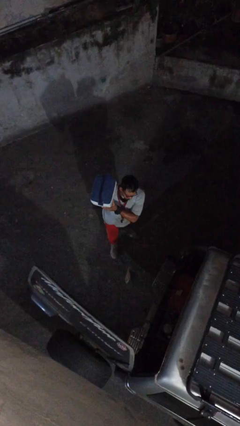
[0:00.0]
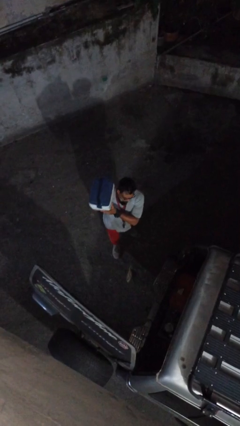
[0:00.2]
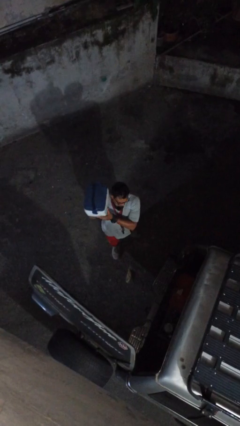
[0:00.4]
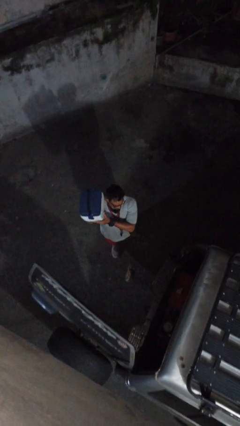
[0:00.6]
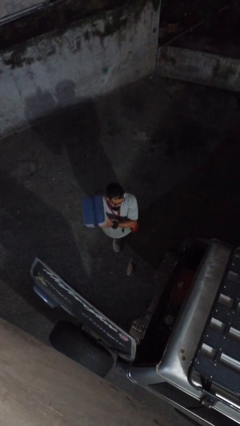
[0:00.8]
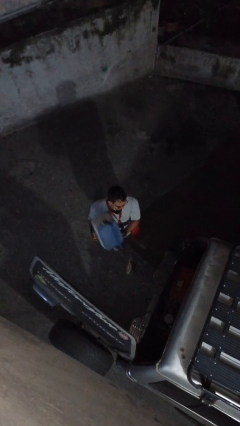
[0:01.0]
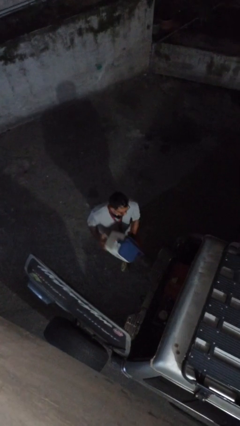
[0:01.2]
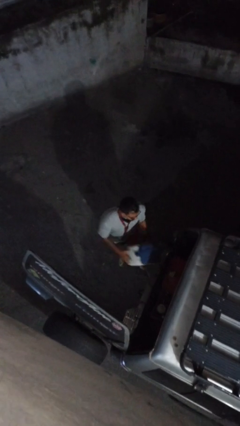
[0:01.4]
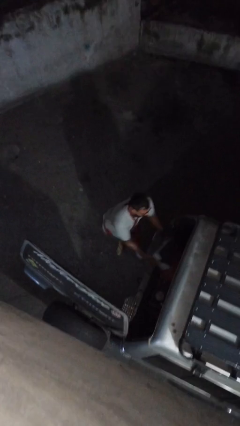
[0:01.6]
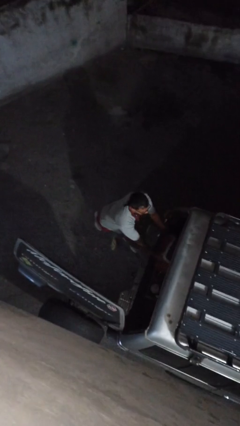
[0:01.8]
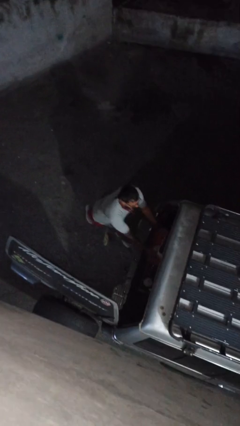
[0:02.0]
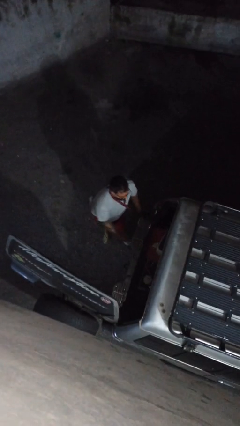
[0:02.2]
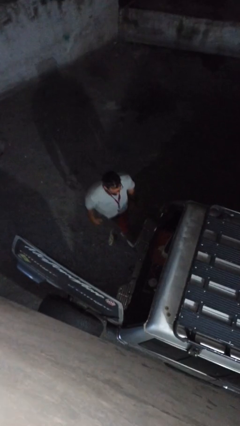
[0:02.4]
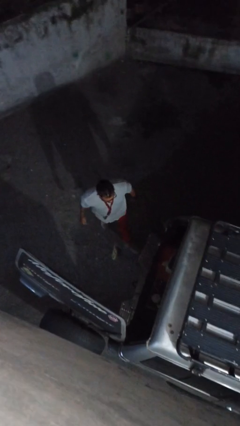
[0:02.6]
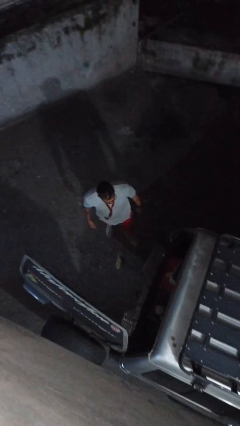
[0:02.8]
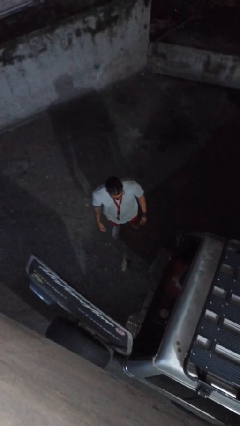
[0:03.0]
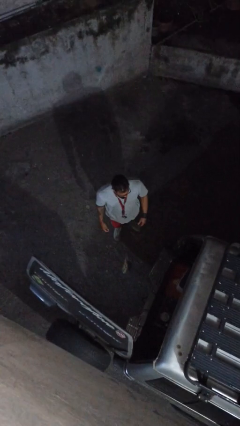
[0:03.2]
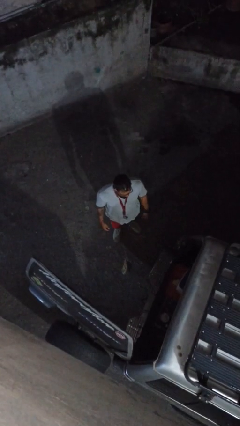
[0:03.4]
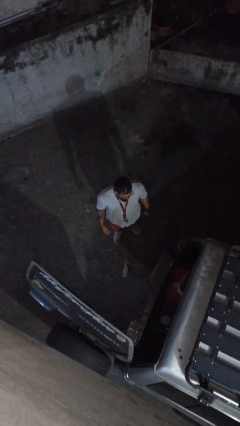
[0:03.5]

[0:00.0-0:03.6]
person loads car

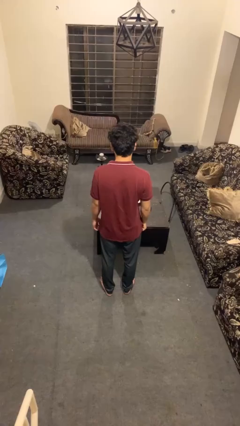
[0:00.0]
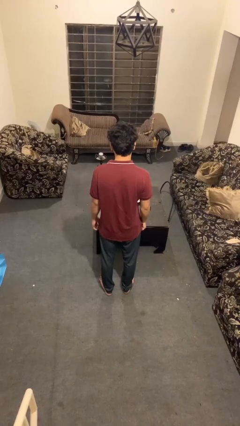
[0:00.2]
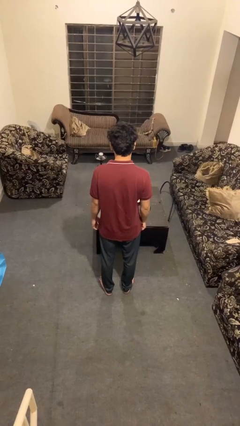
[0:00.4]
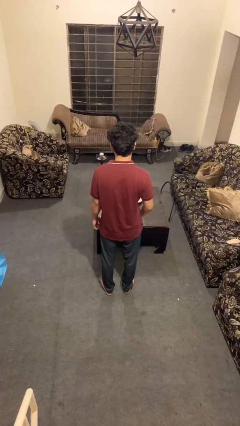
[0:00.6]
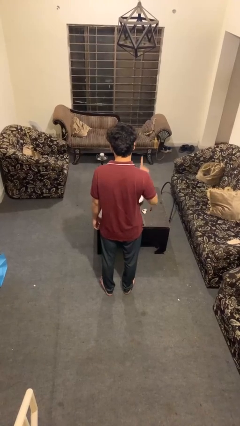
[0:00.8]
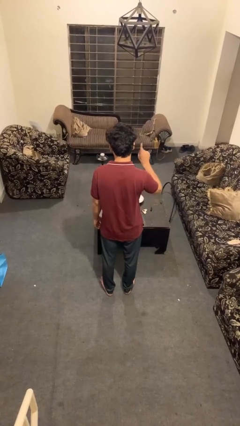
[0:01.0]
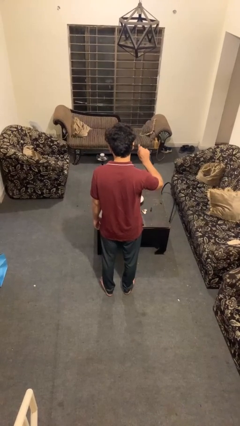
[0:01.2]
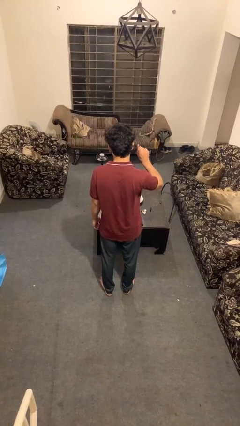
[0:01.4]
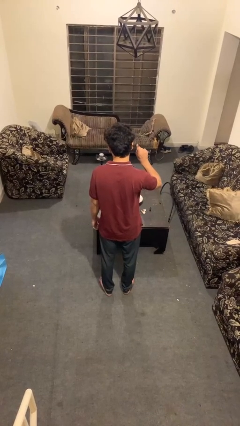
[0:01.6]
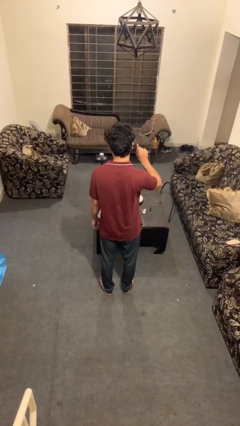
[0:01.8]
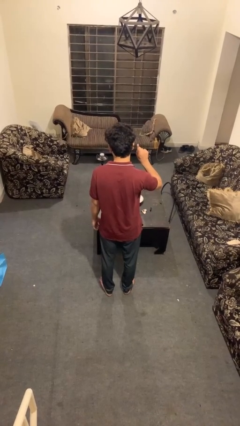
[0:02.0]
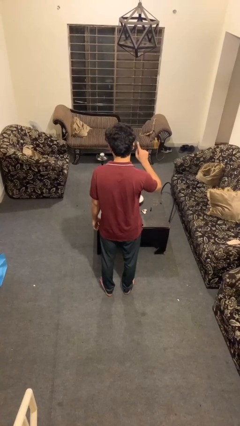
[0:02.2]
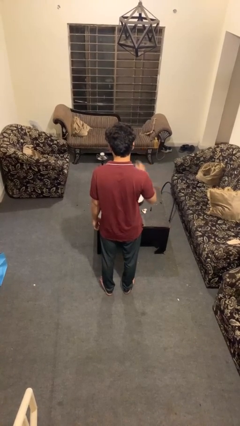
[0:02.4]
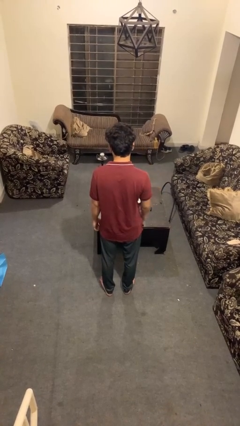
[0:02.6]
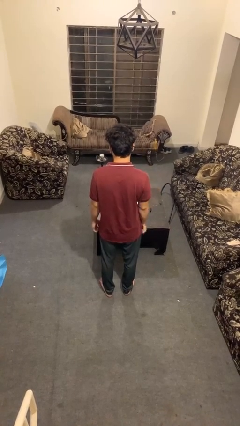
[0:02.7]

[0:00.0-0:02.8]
person gestures number one

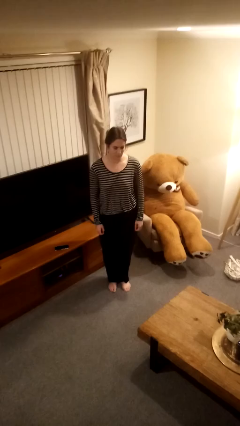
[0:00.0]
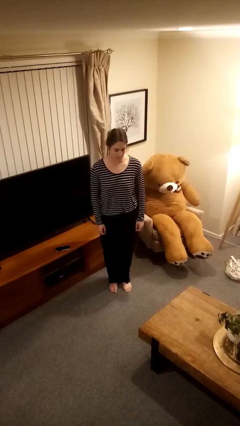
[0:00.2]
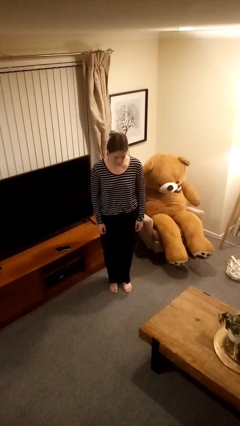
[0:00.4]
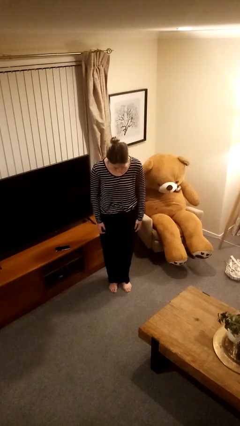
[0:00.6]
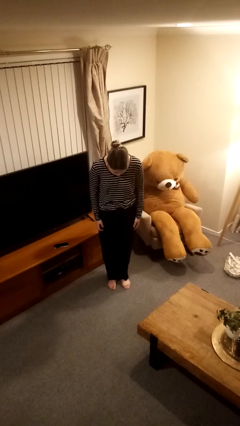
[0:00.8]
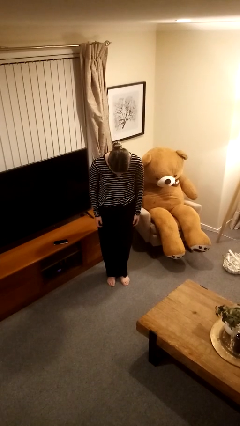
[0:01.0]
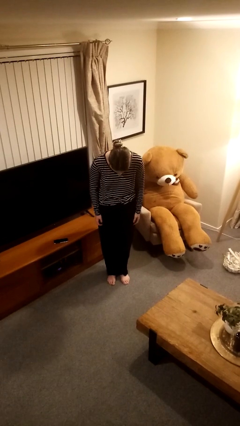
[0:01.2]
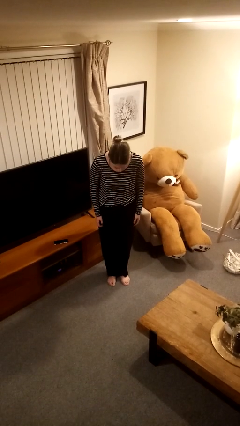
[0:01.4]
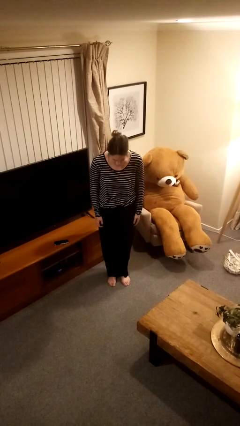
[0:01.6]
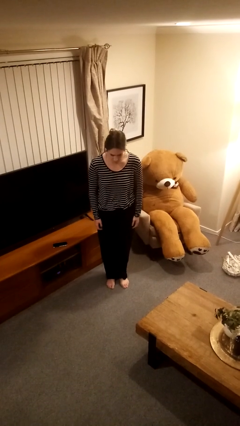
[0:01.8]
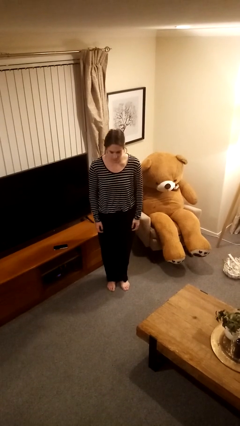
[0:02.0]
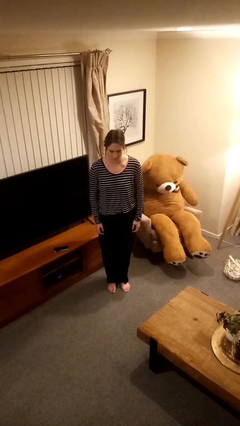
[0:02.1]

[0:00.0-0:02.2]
person bows

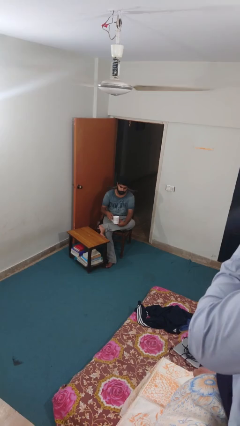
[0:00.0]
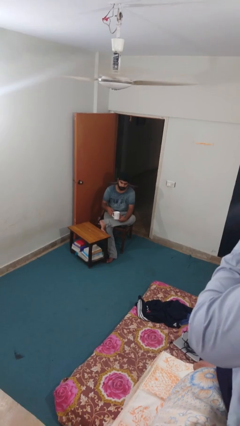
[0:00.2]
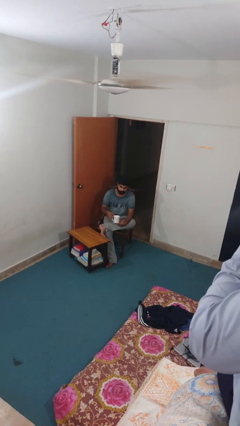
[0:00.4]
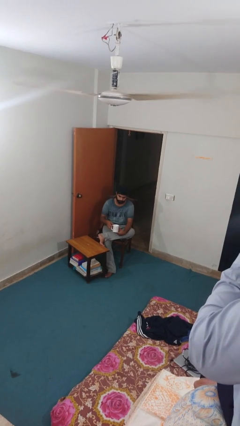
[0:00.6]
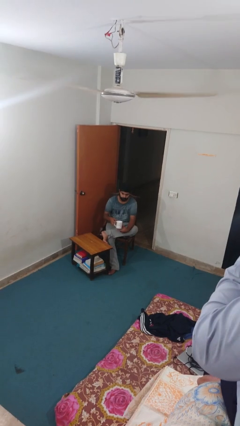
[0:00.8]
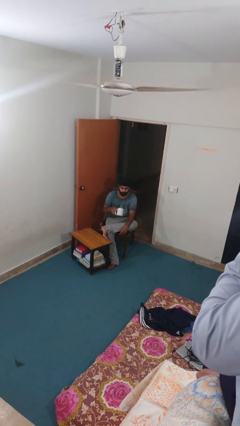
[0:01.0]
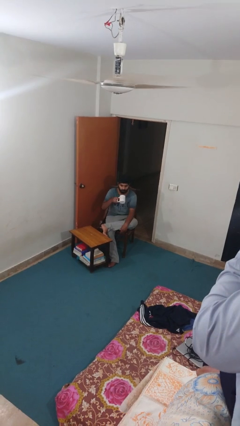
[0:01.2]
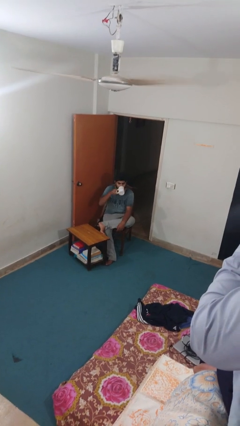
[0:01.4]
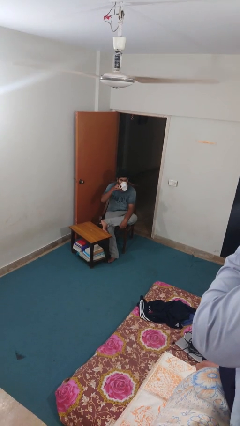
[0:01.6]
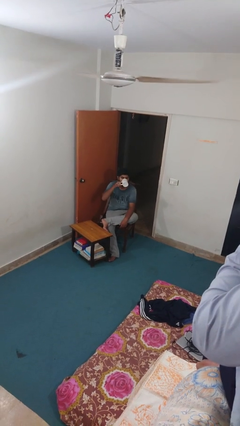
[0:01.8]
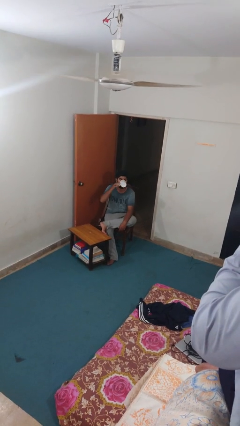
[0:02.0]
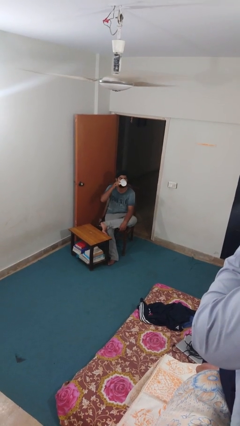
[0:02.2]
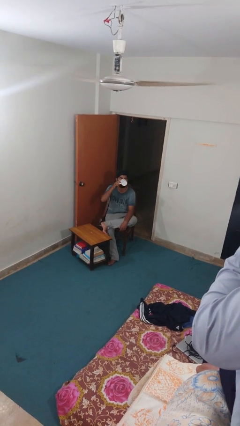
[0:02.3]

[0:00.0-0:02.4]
person drinks from mug

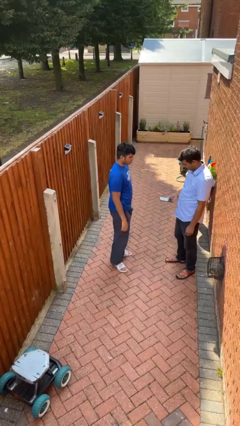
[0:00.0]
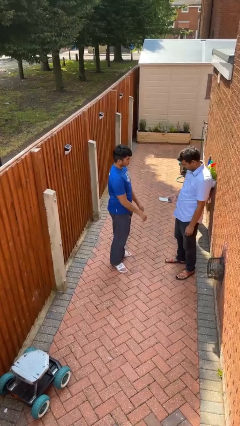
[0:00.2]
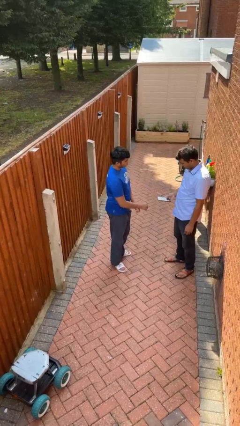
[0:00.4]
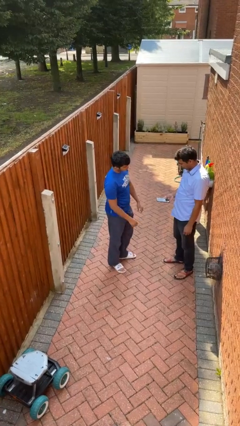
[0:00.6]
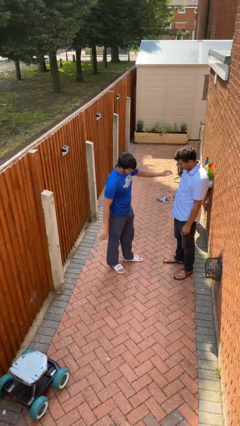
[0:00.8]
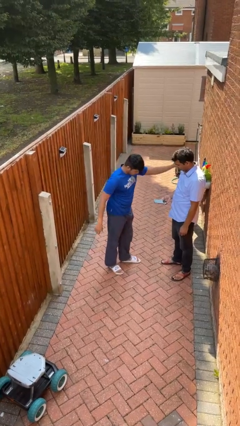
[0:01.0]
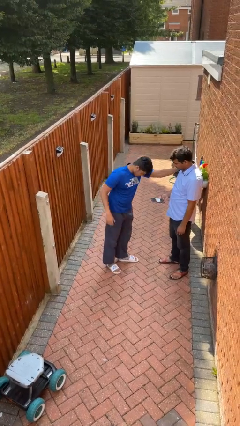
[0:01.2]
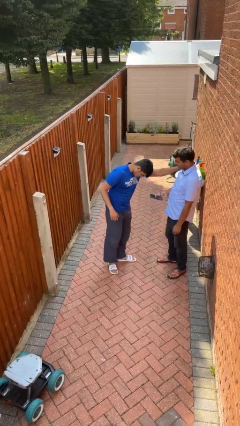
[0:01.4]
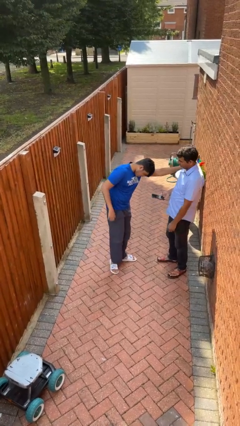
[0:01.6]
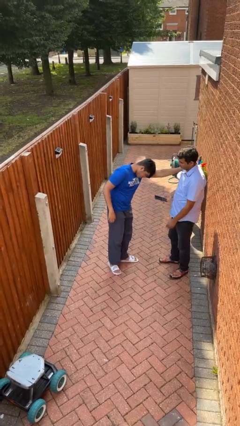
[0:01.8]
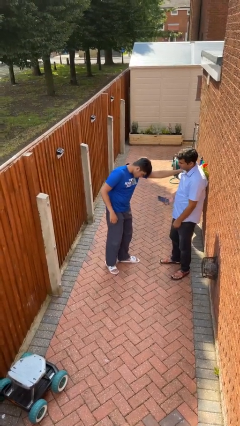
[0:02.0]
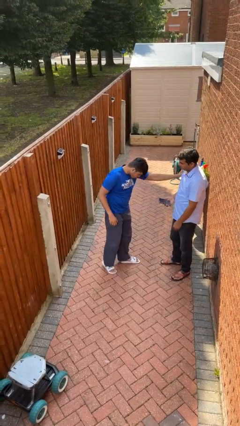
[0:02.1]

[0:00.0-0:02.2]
person shoves person

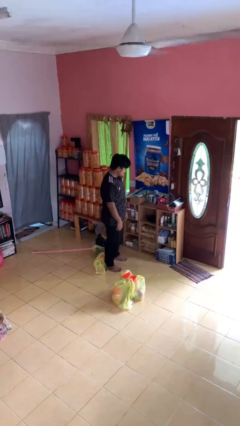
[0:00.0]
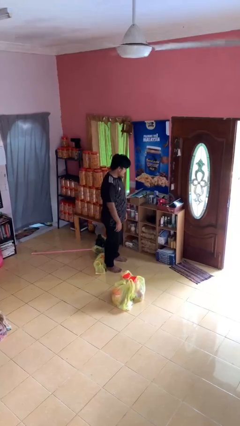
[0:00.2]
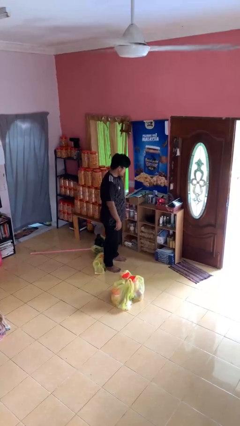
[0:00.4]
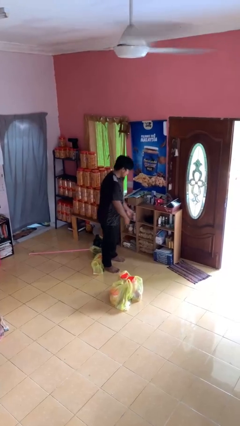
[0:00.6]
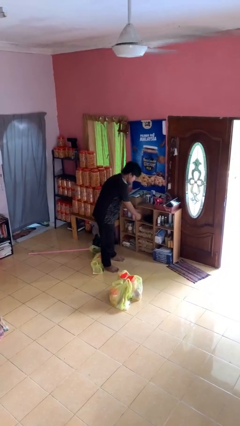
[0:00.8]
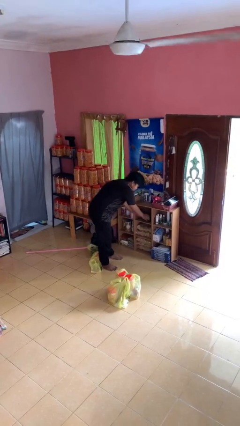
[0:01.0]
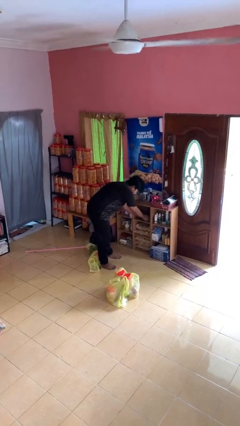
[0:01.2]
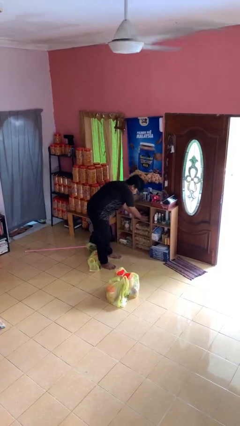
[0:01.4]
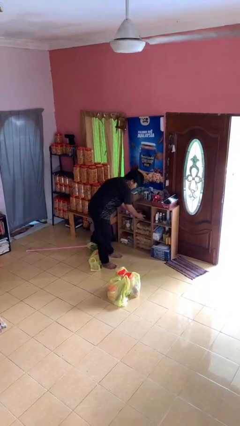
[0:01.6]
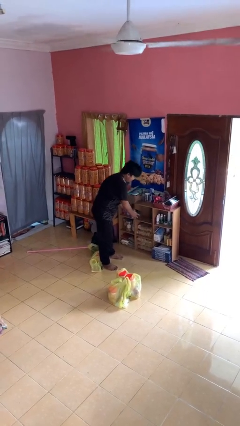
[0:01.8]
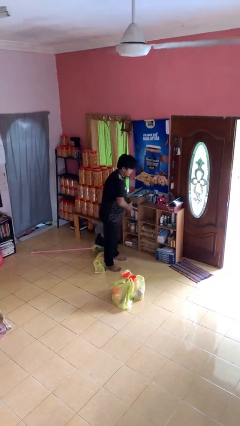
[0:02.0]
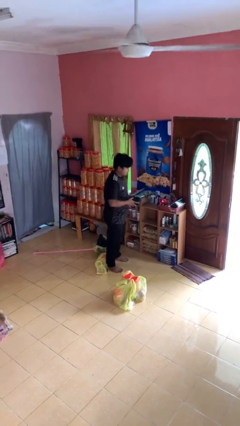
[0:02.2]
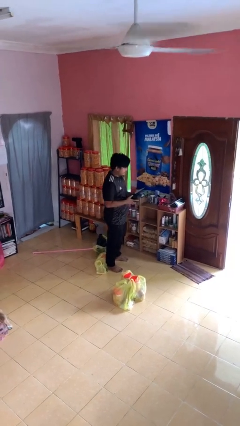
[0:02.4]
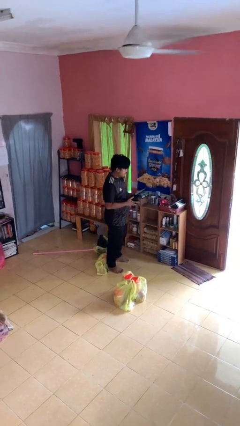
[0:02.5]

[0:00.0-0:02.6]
person takes object from cabinet

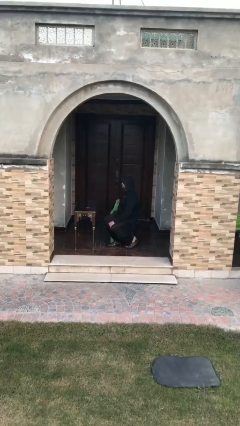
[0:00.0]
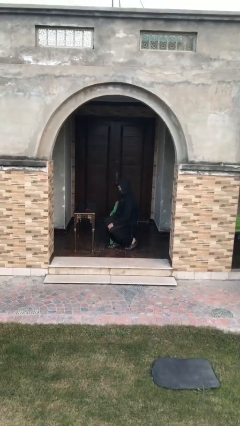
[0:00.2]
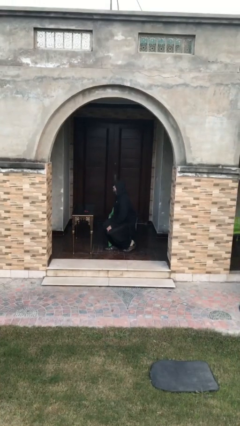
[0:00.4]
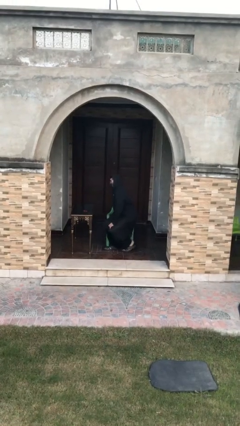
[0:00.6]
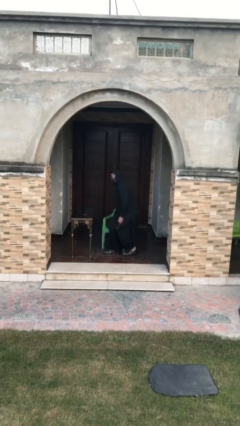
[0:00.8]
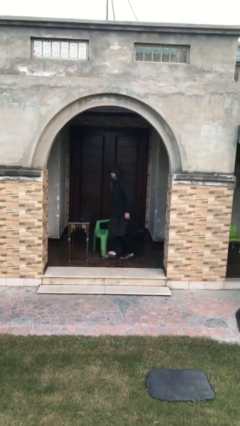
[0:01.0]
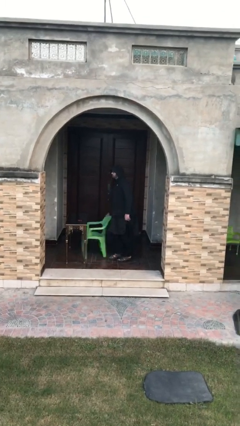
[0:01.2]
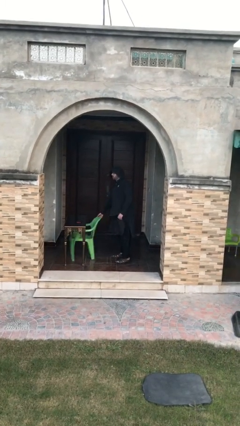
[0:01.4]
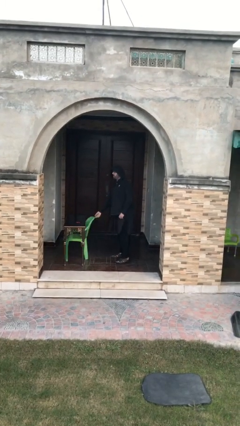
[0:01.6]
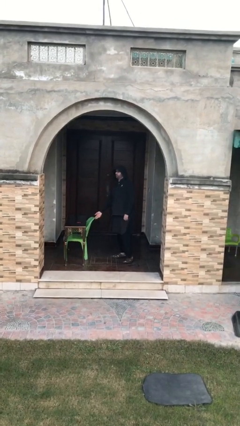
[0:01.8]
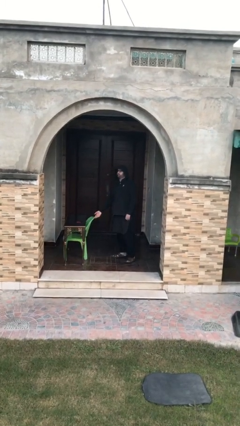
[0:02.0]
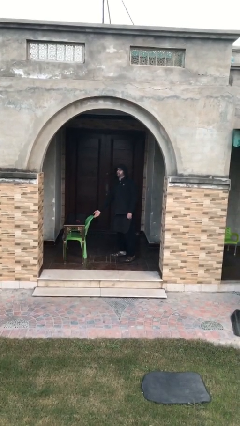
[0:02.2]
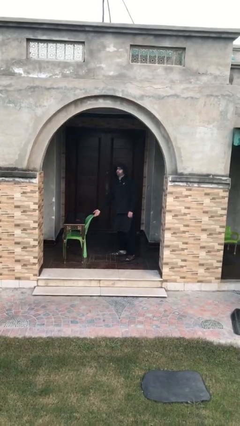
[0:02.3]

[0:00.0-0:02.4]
person stands up
